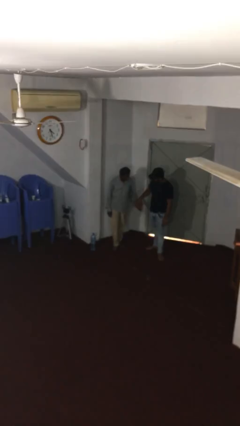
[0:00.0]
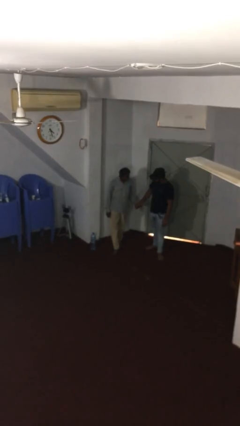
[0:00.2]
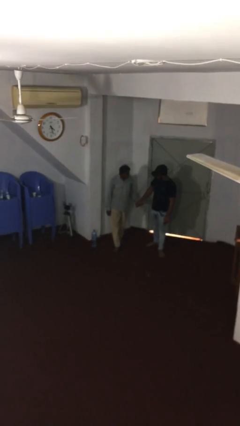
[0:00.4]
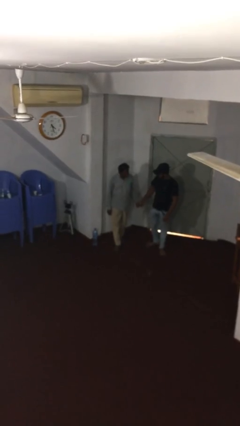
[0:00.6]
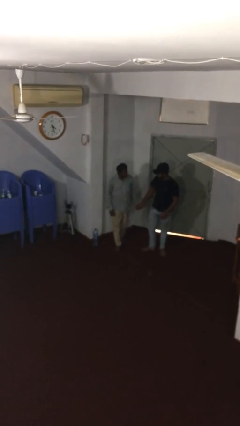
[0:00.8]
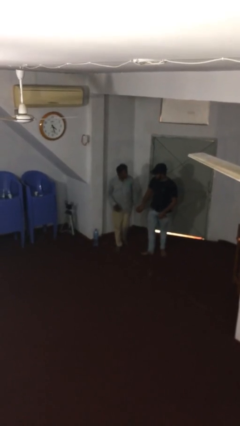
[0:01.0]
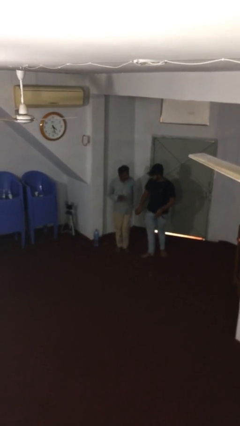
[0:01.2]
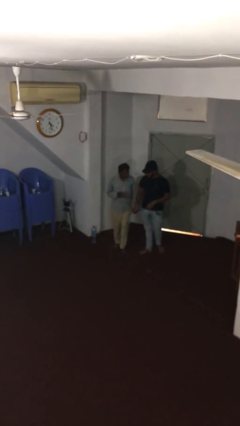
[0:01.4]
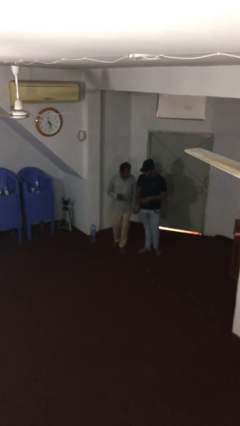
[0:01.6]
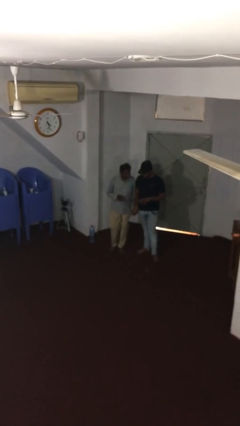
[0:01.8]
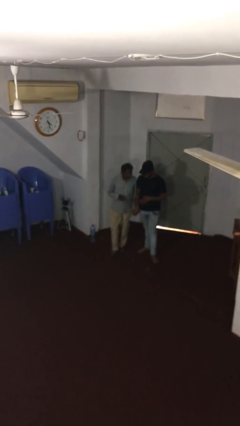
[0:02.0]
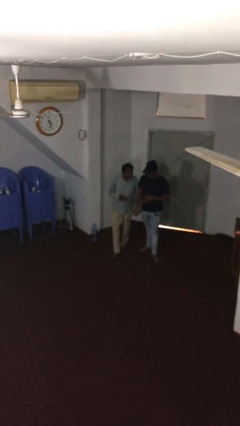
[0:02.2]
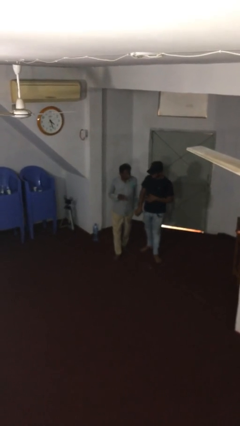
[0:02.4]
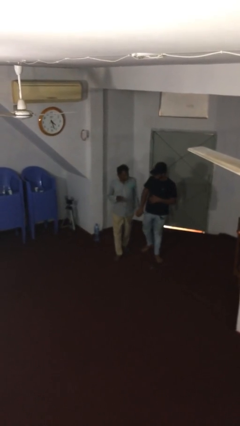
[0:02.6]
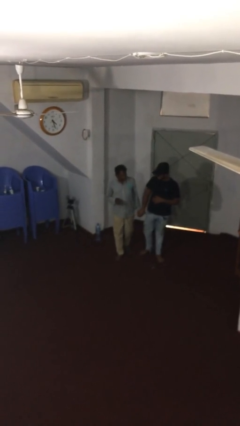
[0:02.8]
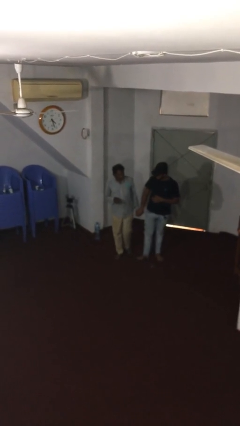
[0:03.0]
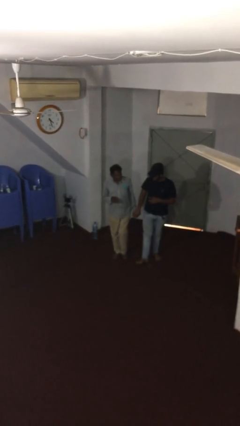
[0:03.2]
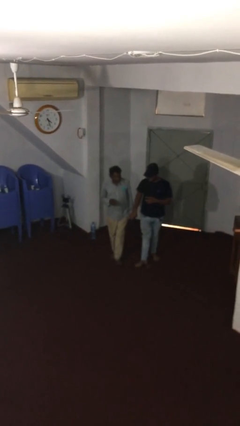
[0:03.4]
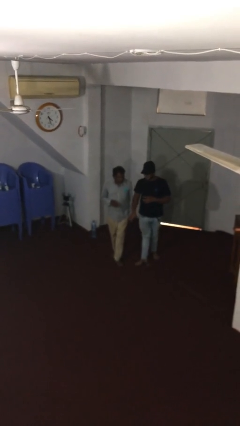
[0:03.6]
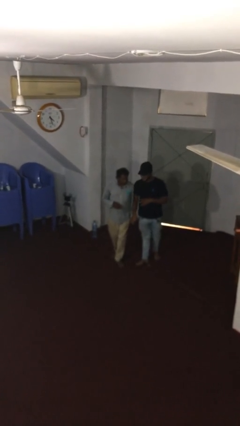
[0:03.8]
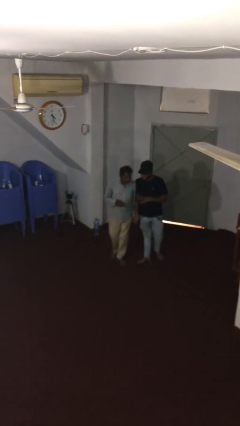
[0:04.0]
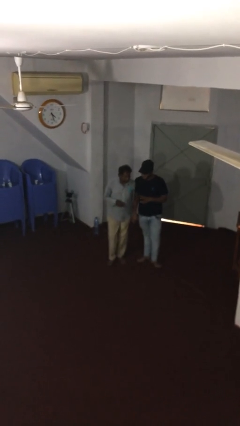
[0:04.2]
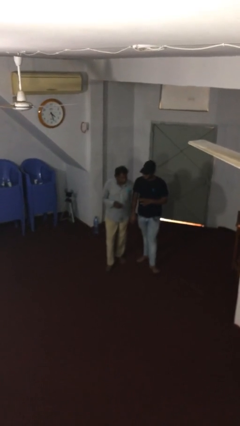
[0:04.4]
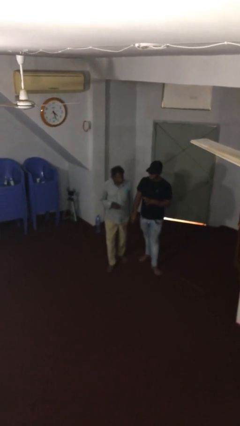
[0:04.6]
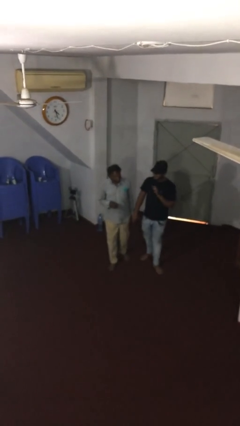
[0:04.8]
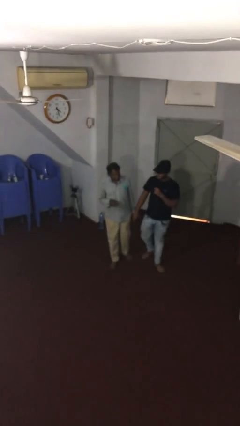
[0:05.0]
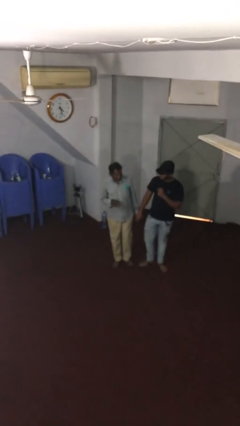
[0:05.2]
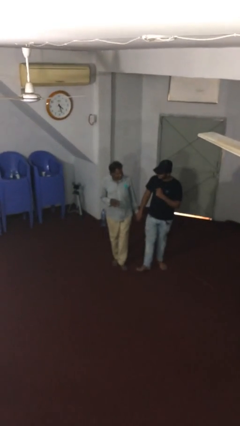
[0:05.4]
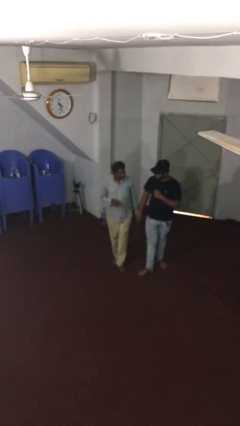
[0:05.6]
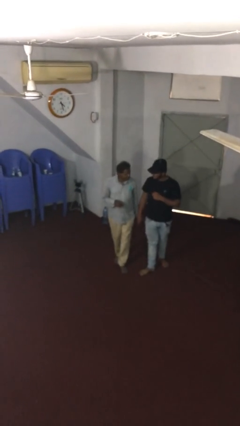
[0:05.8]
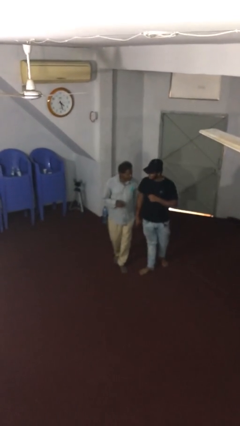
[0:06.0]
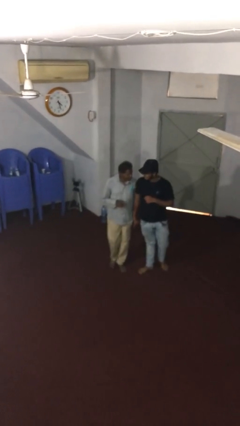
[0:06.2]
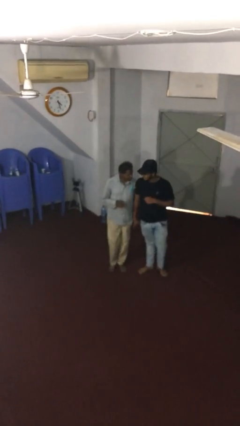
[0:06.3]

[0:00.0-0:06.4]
person holds hand

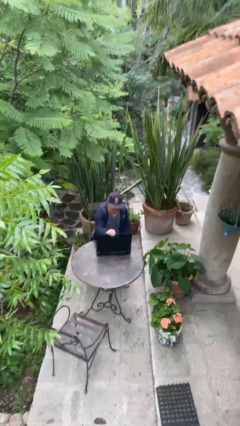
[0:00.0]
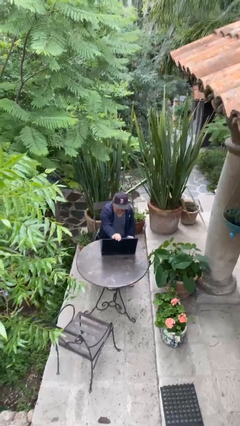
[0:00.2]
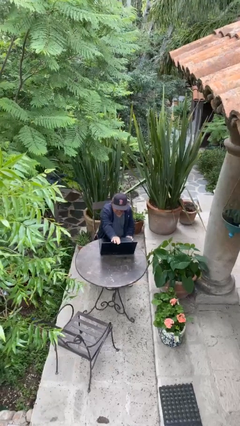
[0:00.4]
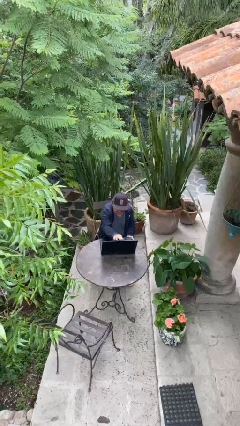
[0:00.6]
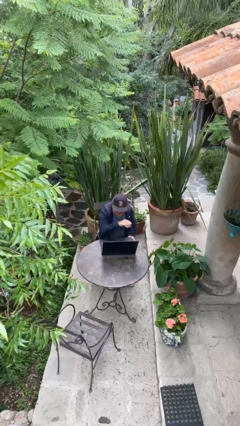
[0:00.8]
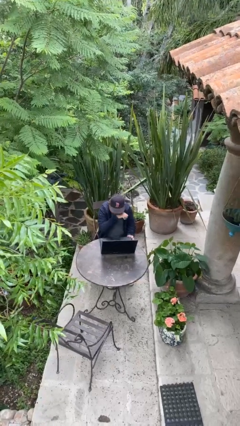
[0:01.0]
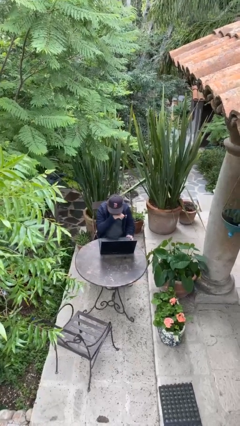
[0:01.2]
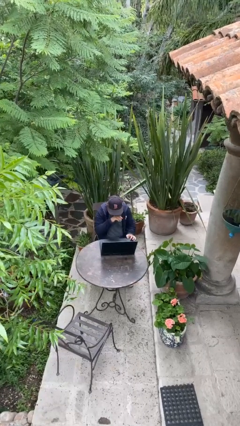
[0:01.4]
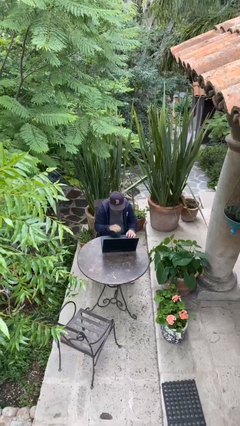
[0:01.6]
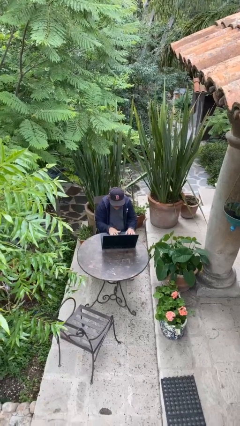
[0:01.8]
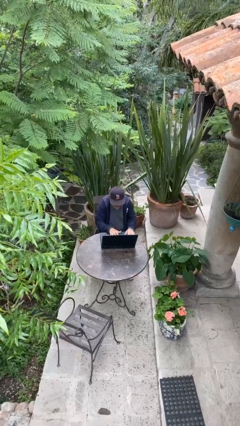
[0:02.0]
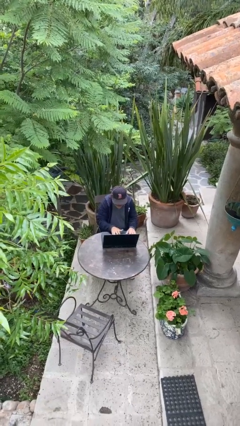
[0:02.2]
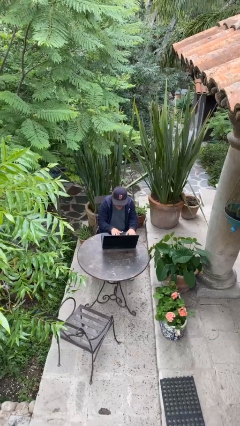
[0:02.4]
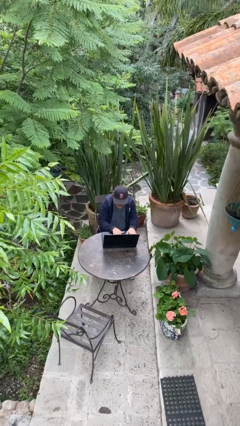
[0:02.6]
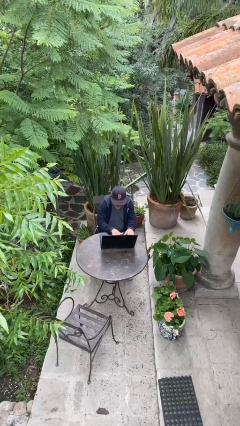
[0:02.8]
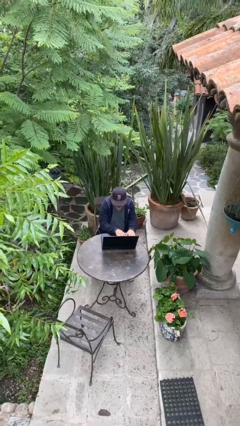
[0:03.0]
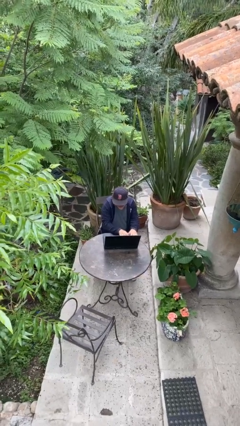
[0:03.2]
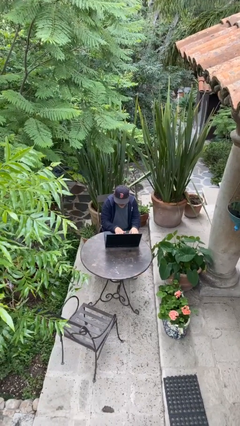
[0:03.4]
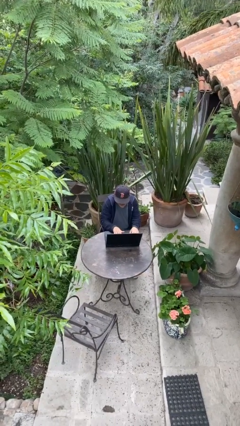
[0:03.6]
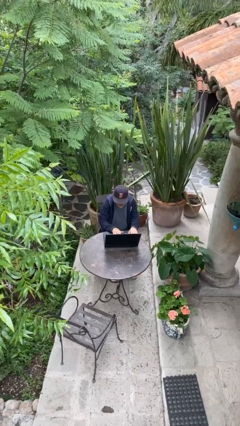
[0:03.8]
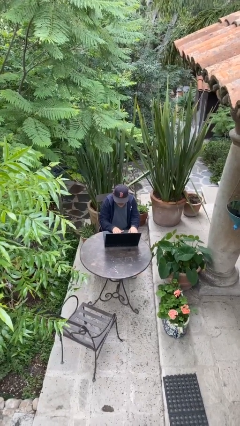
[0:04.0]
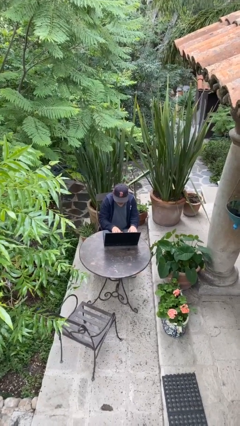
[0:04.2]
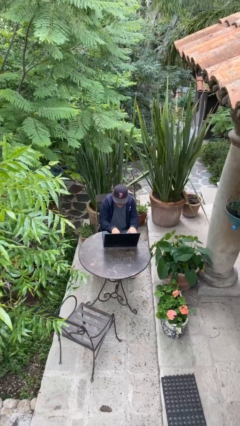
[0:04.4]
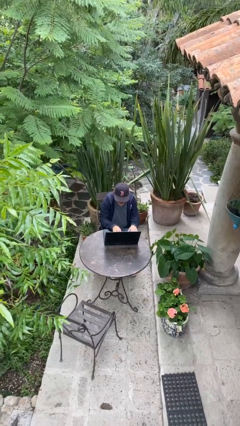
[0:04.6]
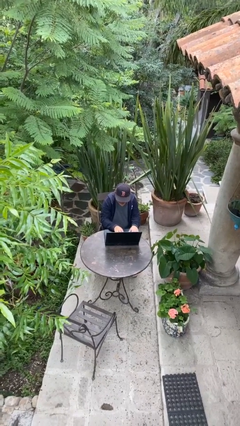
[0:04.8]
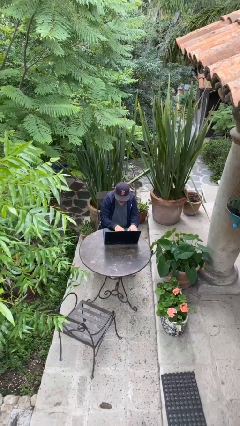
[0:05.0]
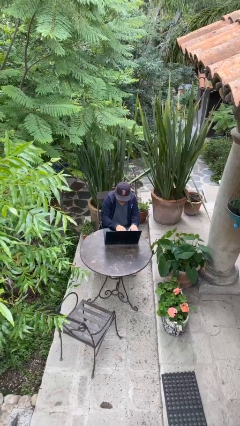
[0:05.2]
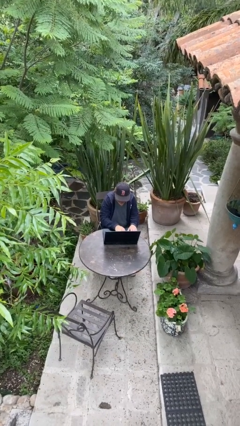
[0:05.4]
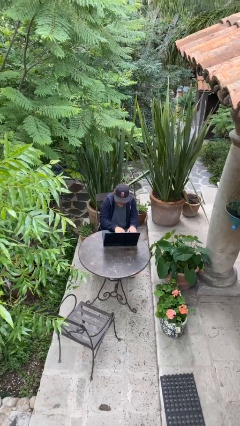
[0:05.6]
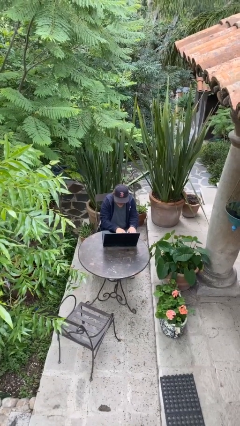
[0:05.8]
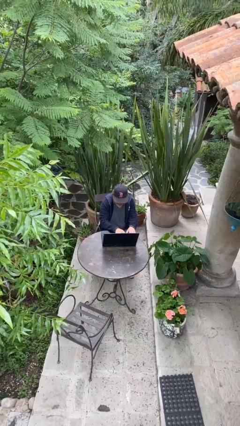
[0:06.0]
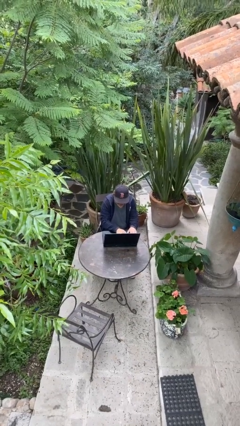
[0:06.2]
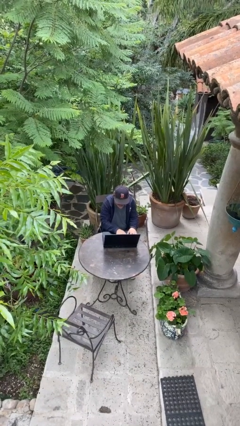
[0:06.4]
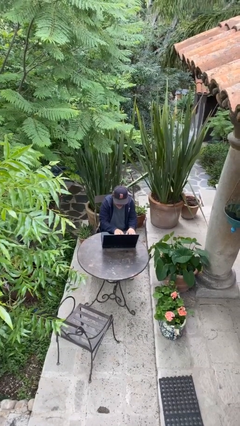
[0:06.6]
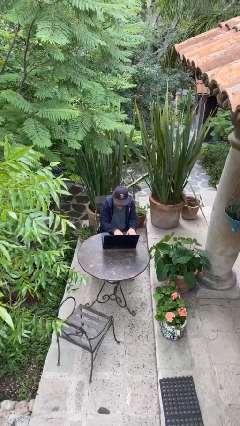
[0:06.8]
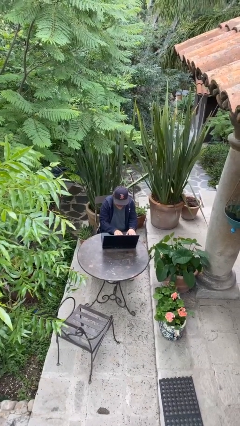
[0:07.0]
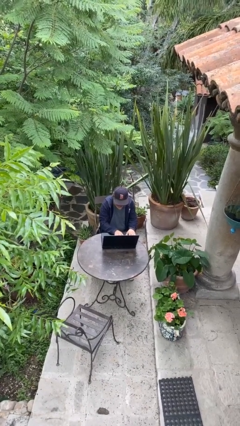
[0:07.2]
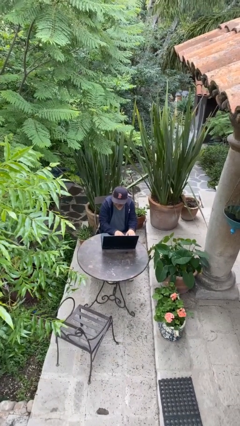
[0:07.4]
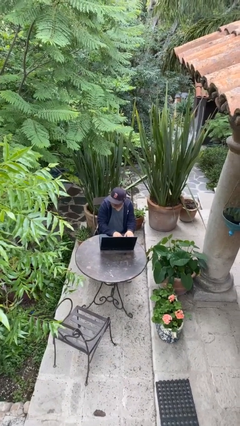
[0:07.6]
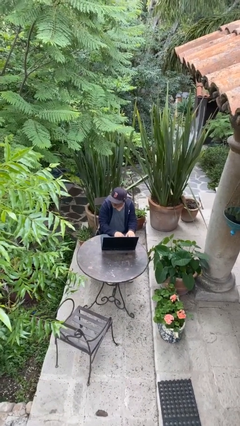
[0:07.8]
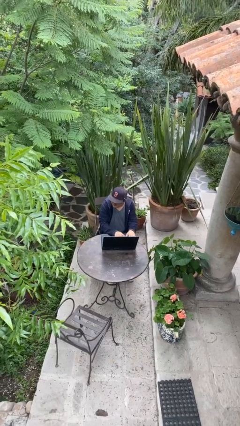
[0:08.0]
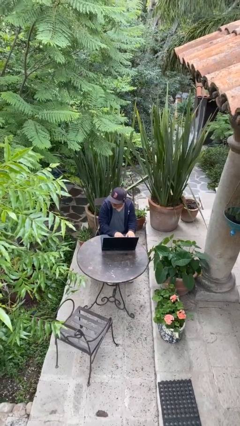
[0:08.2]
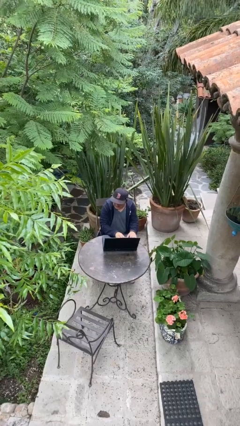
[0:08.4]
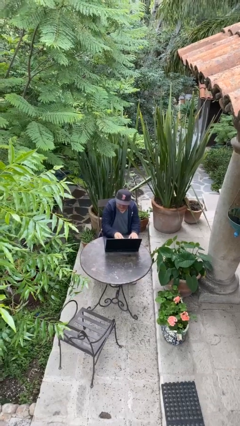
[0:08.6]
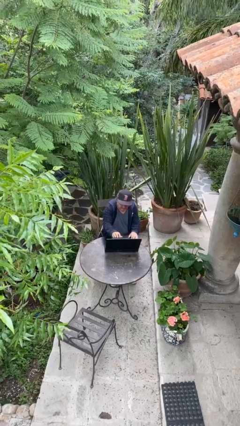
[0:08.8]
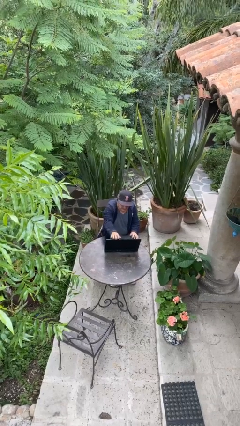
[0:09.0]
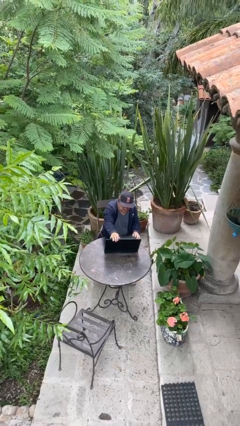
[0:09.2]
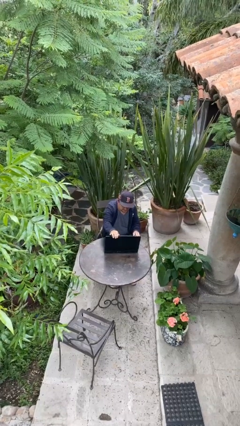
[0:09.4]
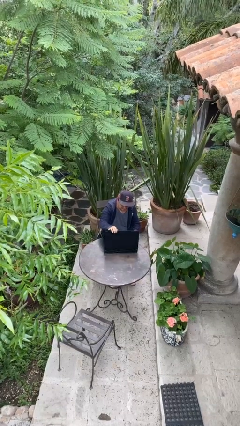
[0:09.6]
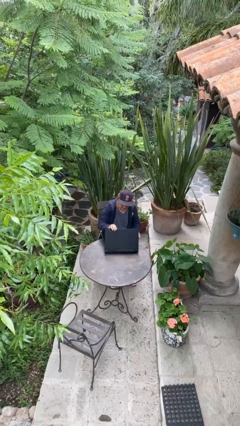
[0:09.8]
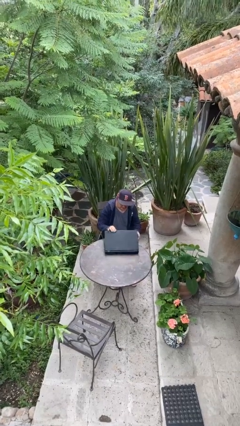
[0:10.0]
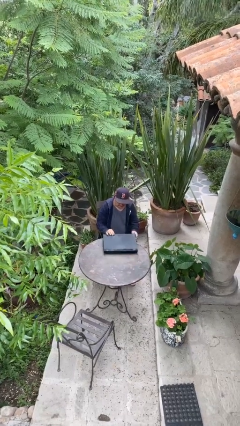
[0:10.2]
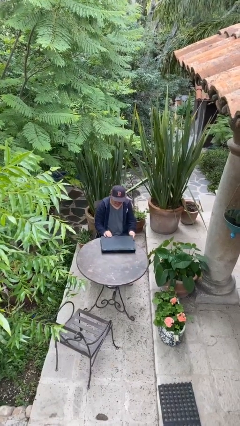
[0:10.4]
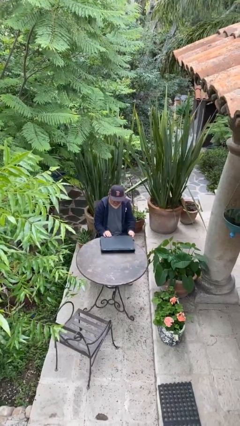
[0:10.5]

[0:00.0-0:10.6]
person interacts with laptop

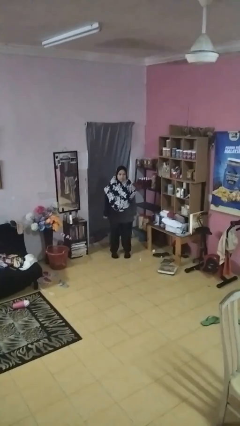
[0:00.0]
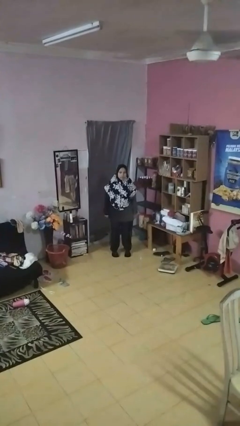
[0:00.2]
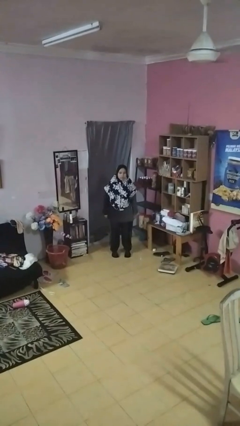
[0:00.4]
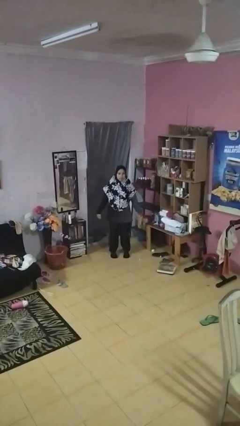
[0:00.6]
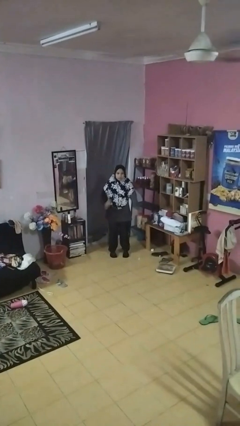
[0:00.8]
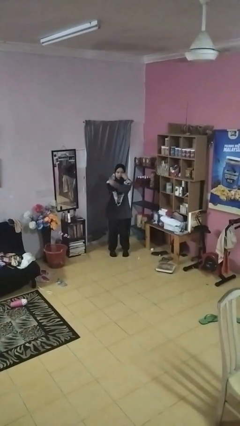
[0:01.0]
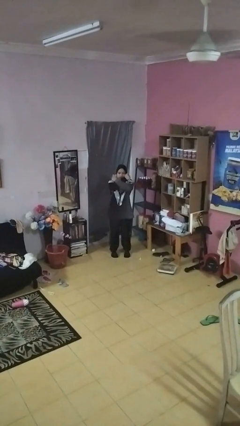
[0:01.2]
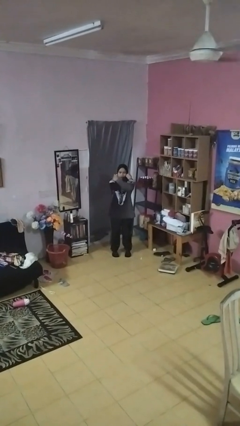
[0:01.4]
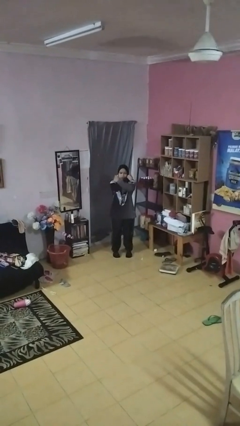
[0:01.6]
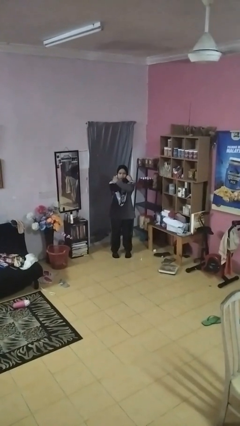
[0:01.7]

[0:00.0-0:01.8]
person crosses arms
